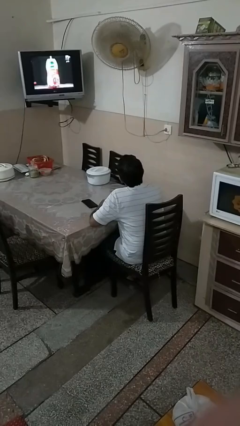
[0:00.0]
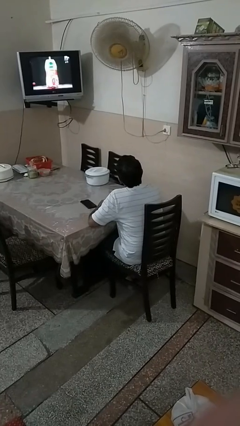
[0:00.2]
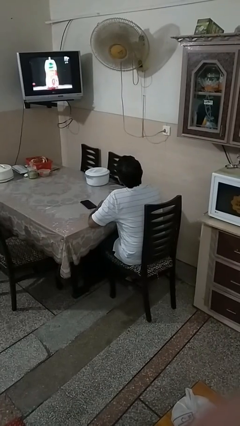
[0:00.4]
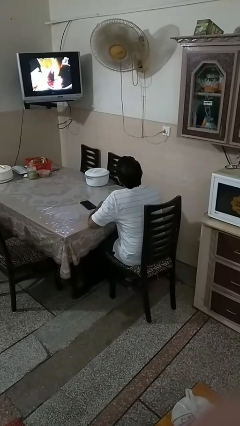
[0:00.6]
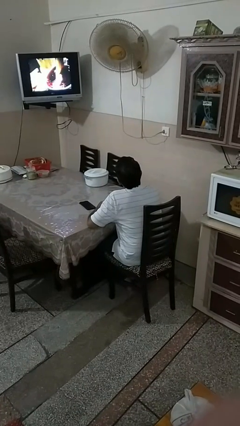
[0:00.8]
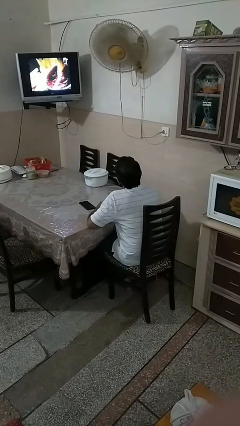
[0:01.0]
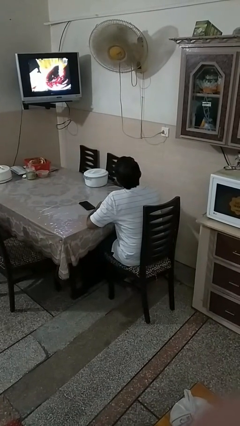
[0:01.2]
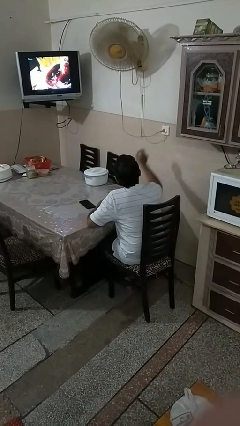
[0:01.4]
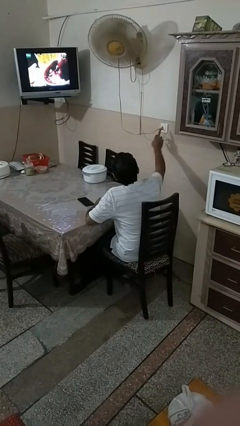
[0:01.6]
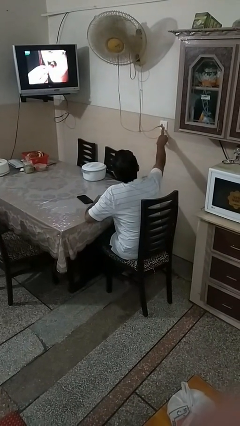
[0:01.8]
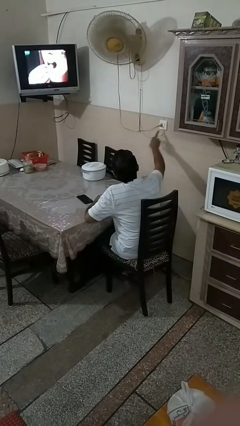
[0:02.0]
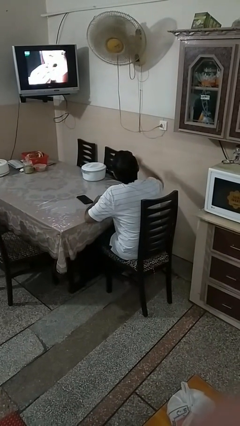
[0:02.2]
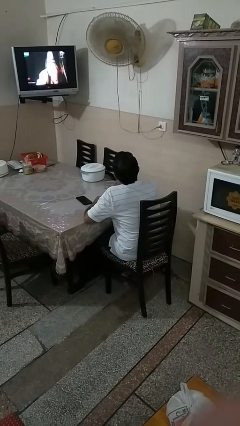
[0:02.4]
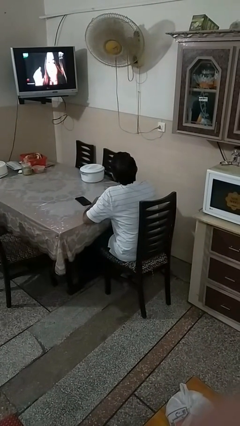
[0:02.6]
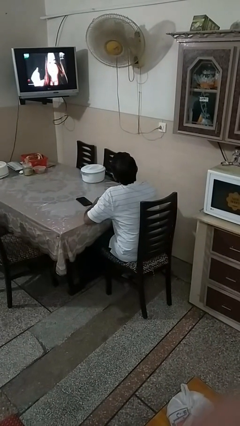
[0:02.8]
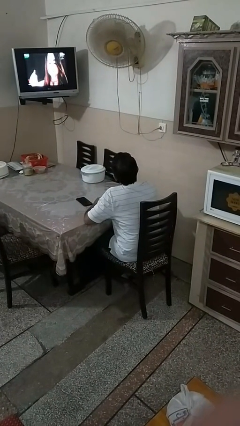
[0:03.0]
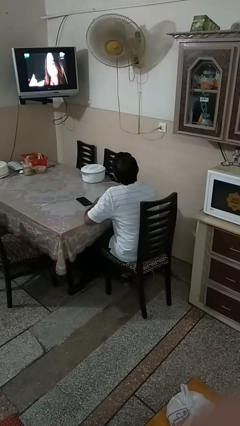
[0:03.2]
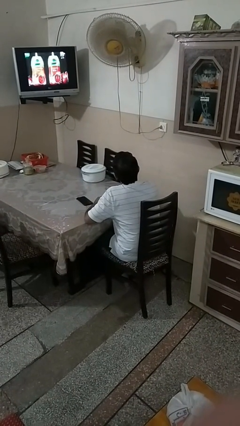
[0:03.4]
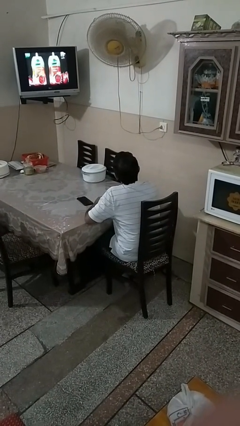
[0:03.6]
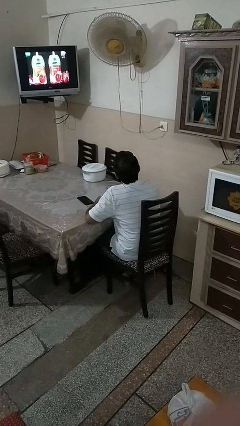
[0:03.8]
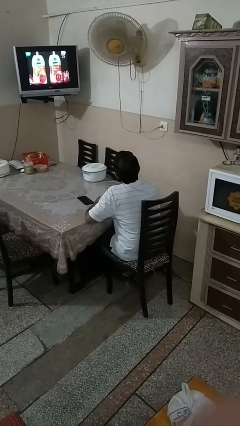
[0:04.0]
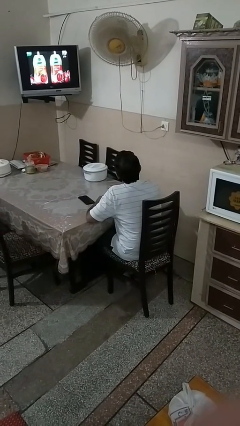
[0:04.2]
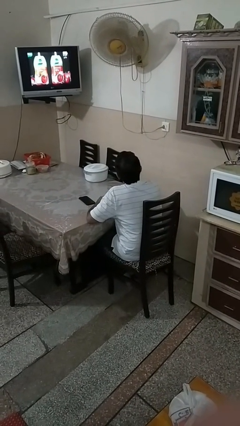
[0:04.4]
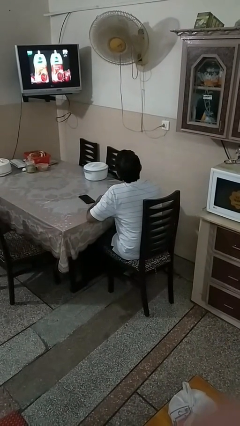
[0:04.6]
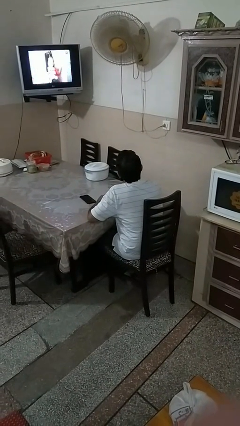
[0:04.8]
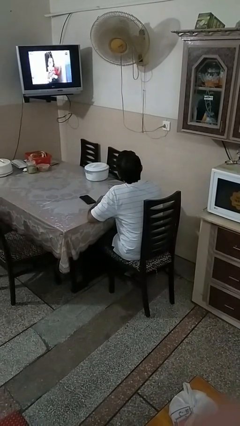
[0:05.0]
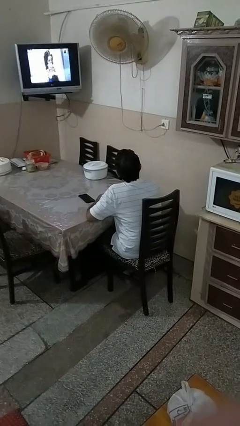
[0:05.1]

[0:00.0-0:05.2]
person turns on fan

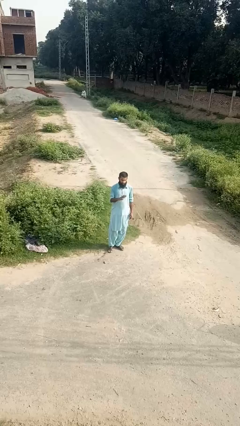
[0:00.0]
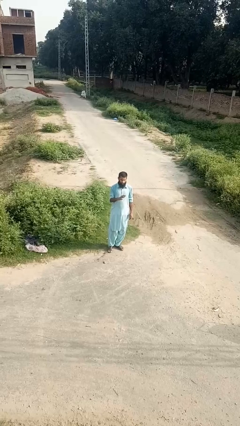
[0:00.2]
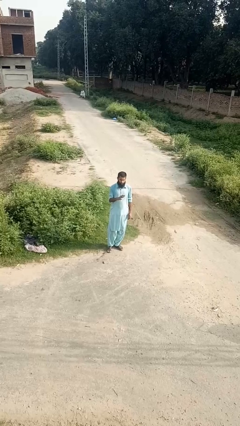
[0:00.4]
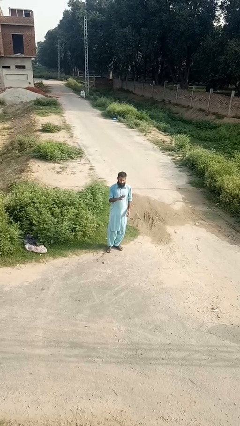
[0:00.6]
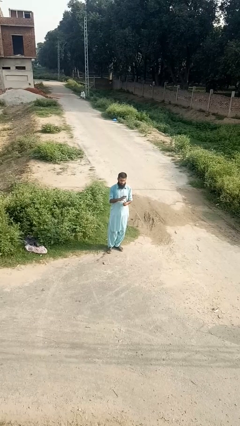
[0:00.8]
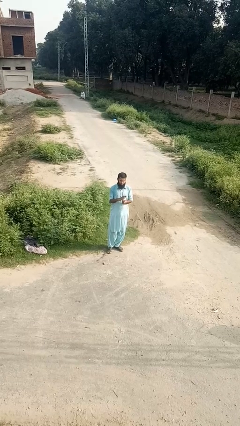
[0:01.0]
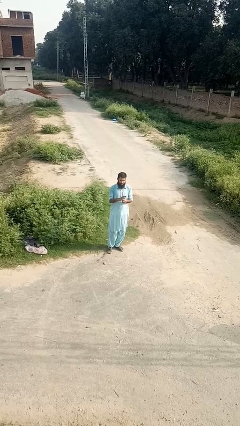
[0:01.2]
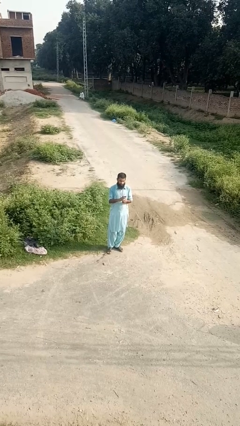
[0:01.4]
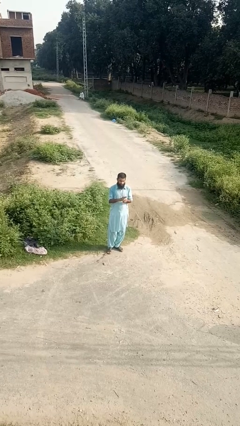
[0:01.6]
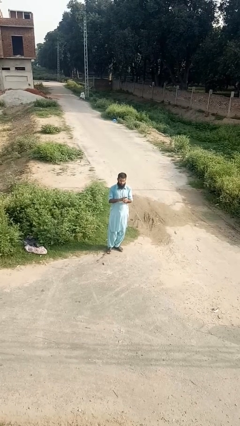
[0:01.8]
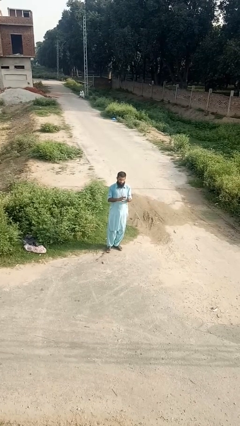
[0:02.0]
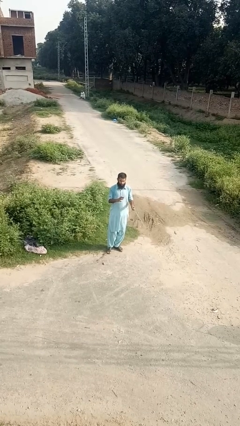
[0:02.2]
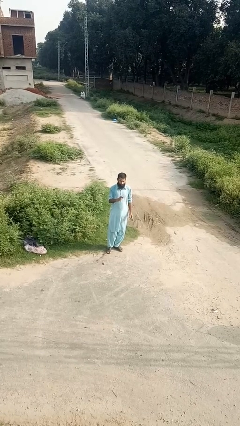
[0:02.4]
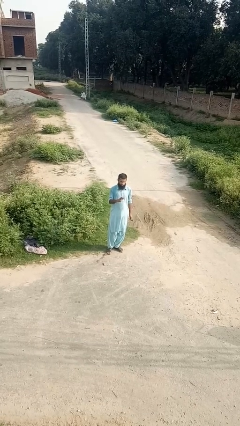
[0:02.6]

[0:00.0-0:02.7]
person takes off ring

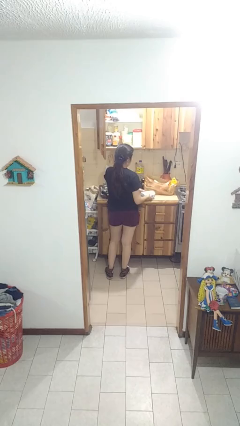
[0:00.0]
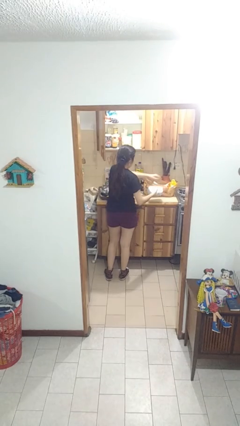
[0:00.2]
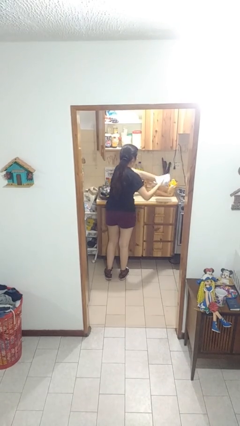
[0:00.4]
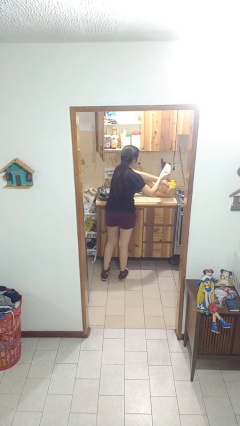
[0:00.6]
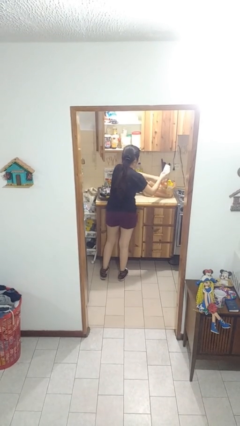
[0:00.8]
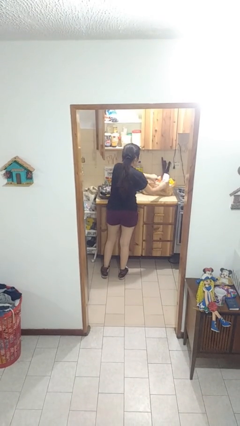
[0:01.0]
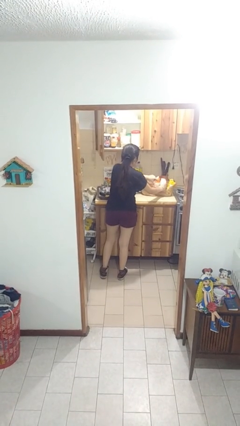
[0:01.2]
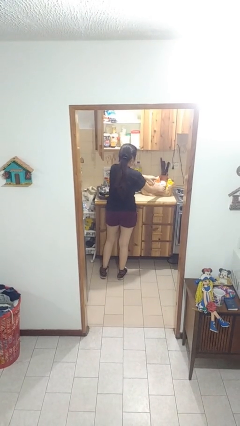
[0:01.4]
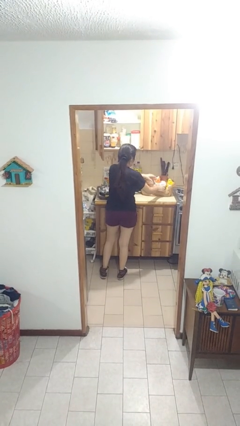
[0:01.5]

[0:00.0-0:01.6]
person puts object into bag

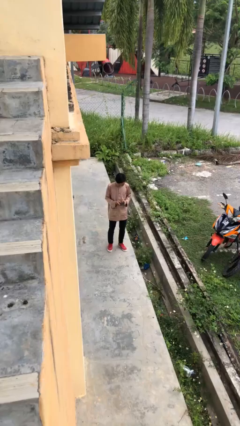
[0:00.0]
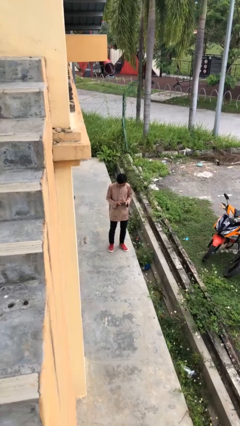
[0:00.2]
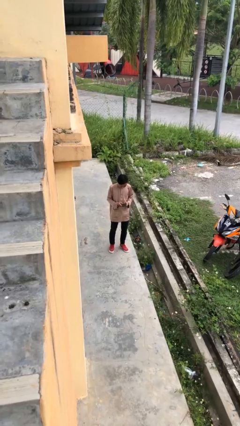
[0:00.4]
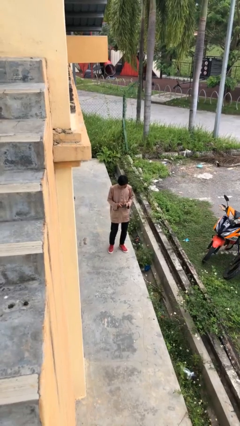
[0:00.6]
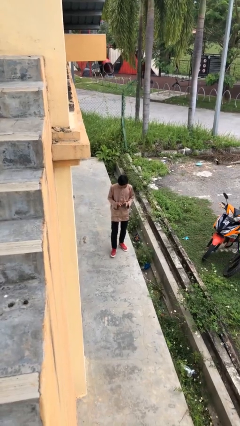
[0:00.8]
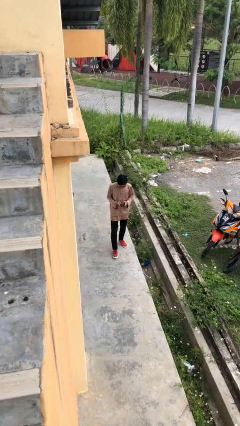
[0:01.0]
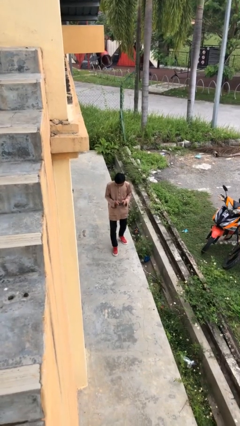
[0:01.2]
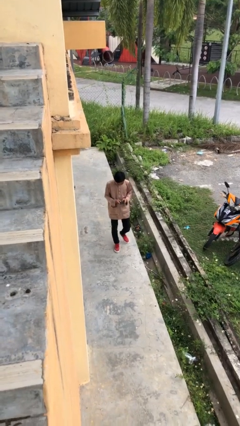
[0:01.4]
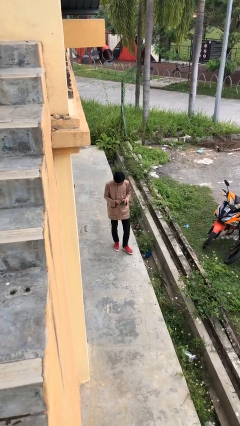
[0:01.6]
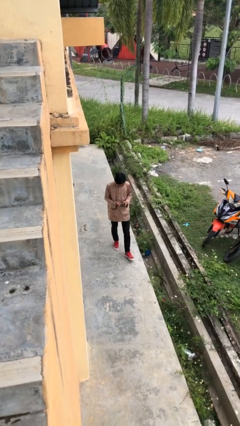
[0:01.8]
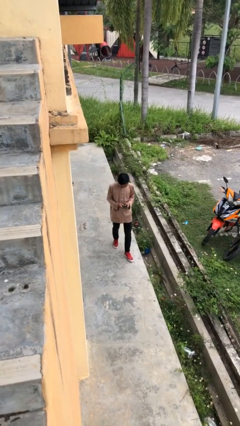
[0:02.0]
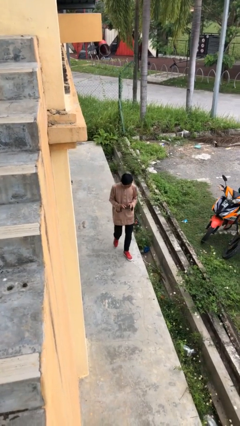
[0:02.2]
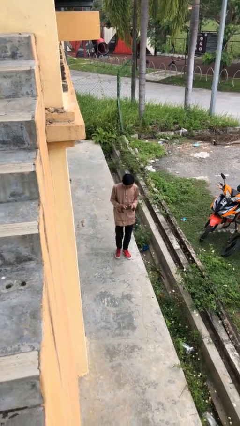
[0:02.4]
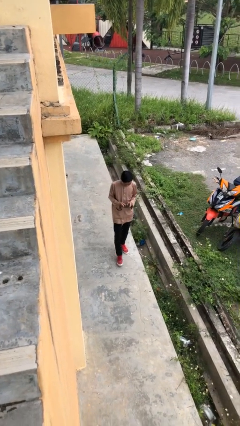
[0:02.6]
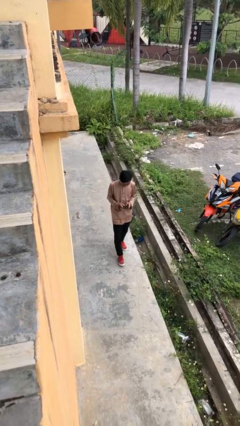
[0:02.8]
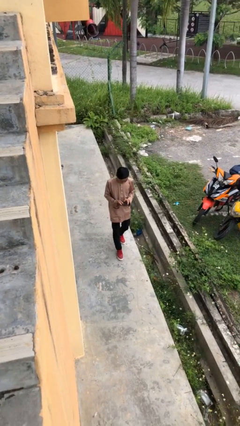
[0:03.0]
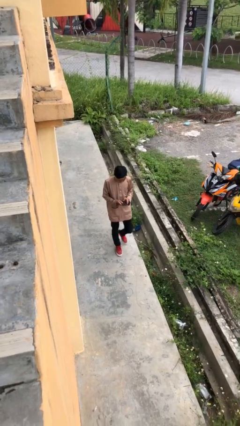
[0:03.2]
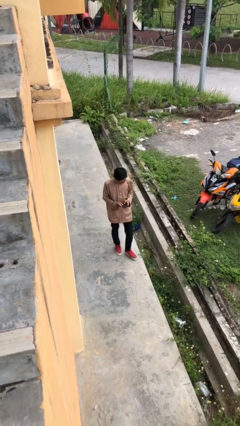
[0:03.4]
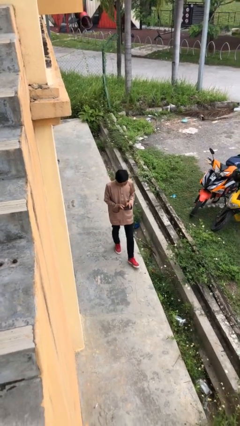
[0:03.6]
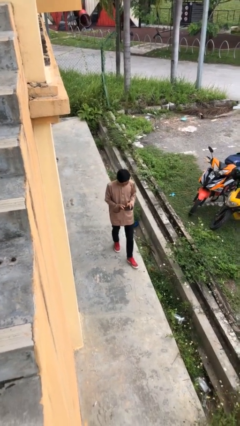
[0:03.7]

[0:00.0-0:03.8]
person texts on phone

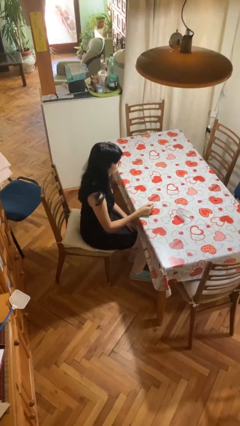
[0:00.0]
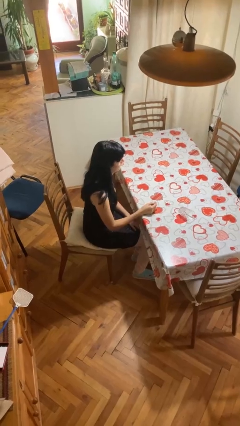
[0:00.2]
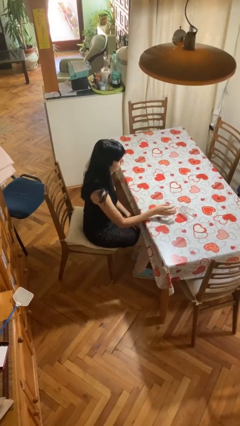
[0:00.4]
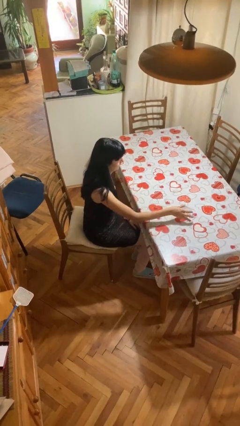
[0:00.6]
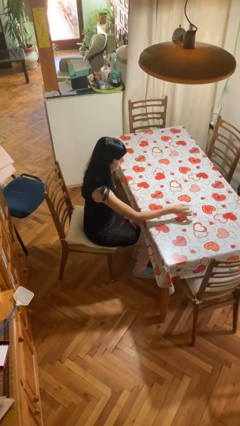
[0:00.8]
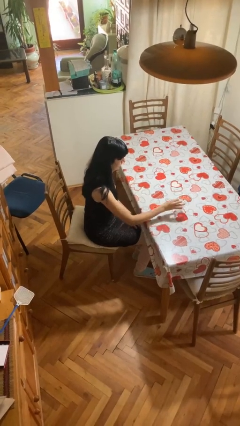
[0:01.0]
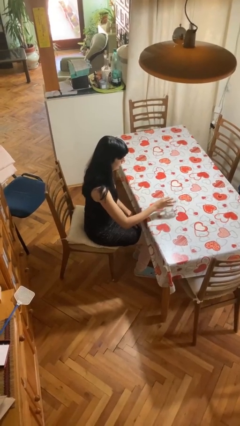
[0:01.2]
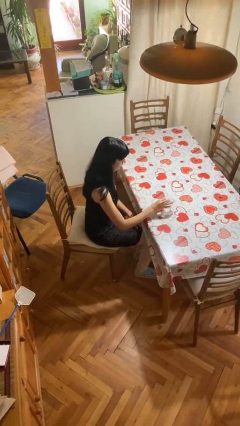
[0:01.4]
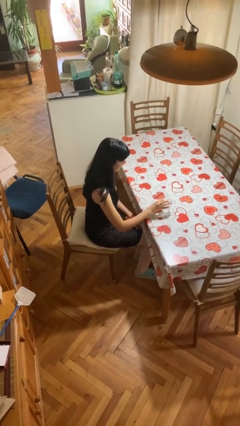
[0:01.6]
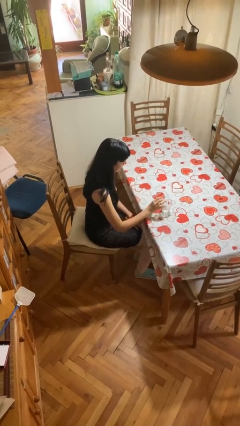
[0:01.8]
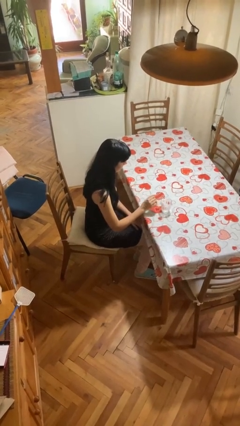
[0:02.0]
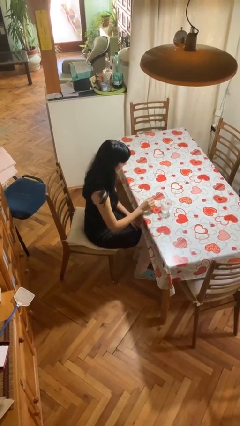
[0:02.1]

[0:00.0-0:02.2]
person sets upright glass

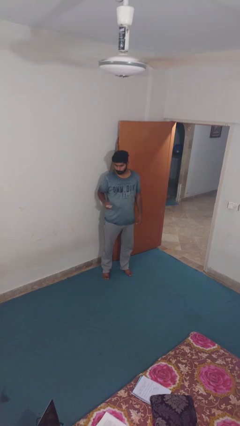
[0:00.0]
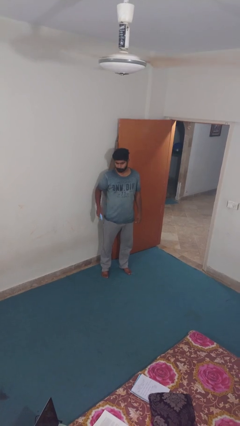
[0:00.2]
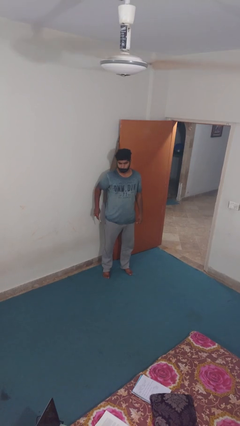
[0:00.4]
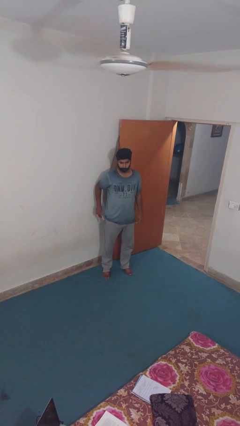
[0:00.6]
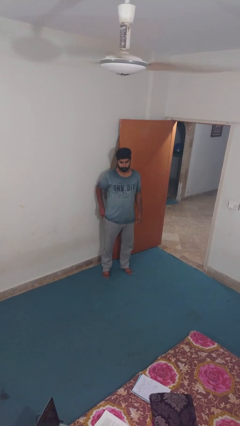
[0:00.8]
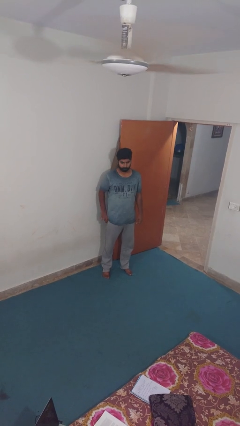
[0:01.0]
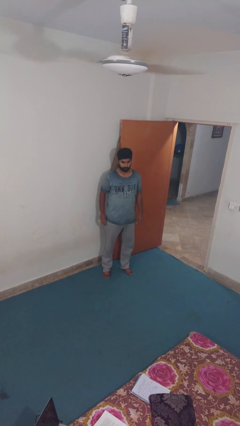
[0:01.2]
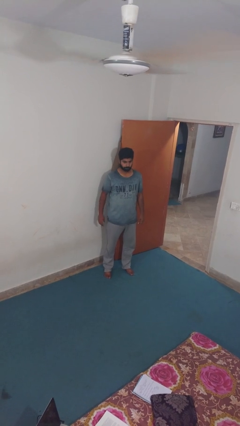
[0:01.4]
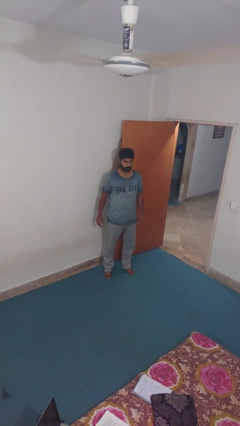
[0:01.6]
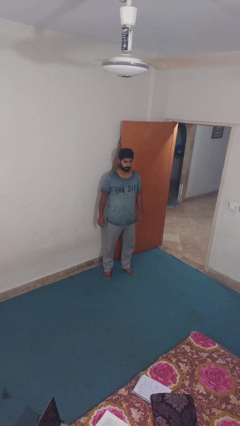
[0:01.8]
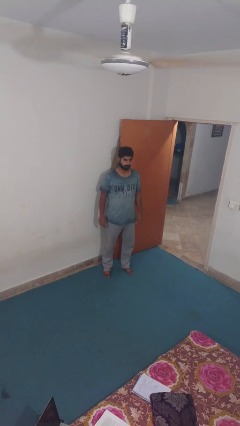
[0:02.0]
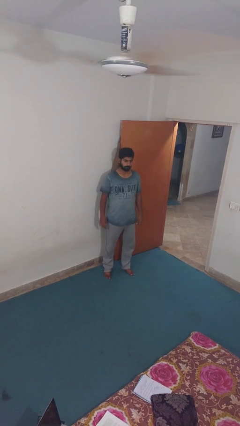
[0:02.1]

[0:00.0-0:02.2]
person puts phone into pocket
